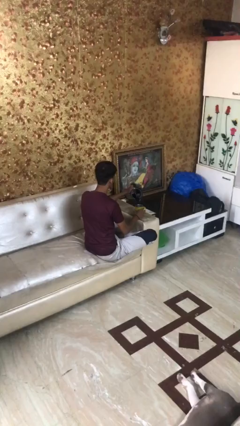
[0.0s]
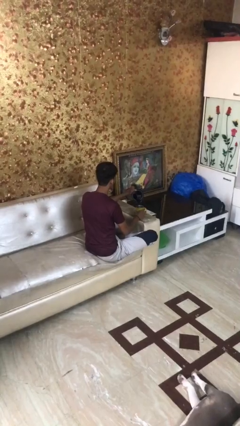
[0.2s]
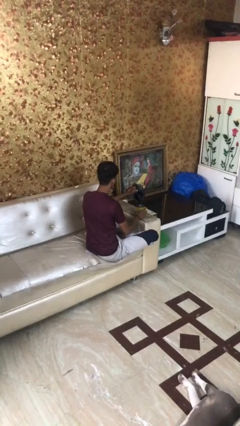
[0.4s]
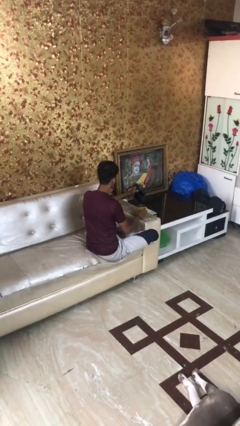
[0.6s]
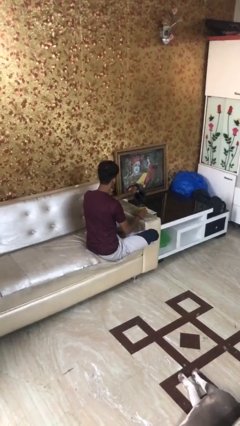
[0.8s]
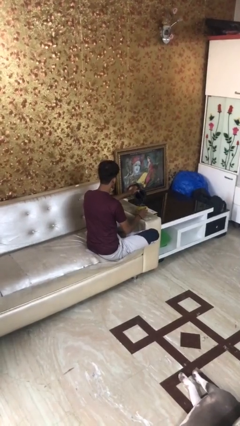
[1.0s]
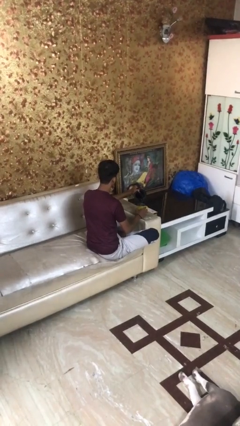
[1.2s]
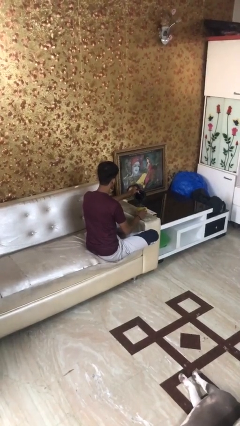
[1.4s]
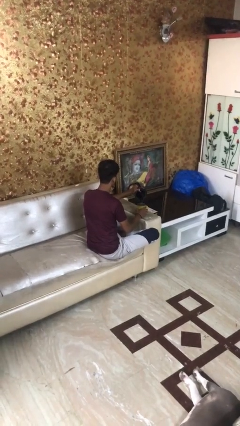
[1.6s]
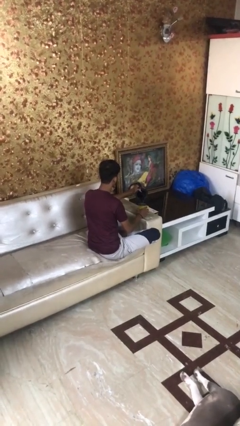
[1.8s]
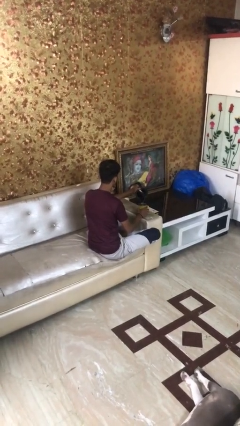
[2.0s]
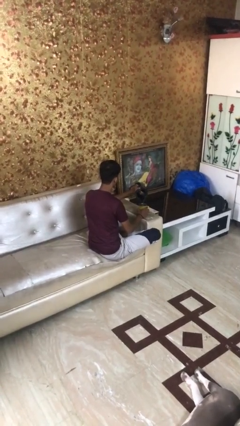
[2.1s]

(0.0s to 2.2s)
person pours coffee into mug

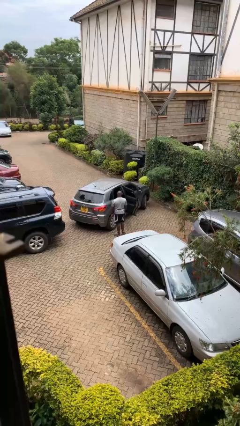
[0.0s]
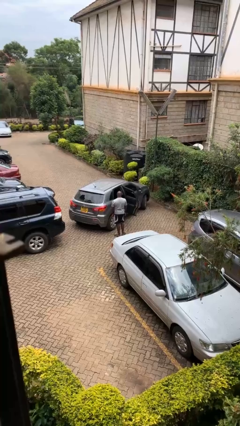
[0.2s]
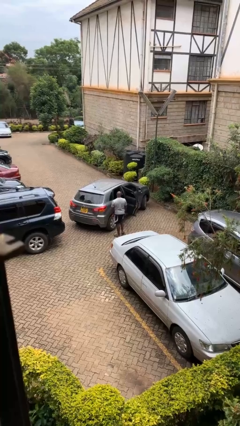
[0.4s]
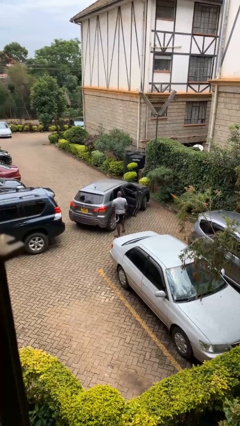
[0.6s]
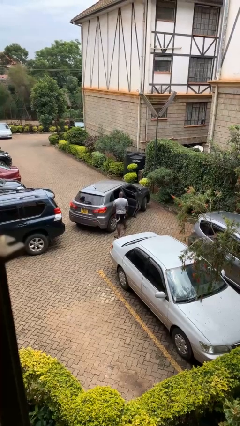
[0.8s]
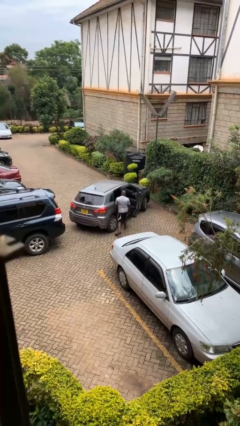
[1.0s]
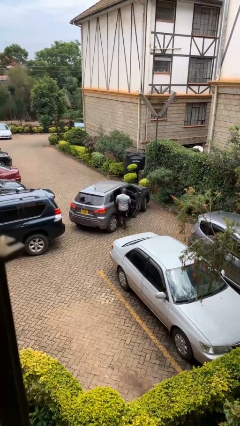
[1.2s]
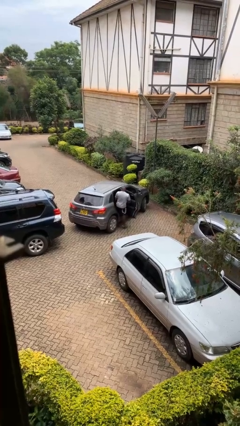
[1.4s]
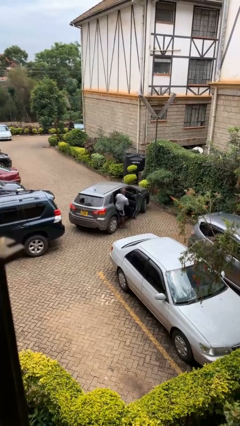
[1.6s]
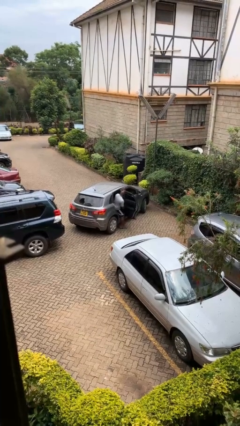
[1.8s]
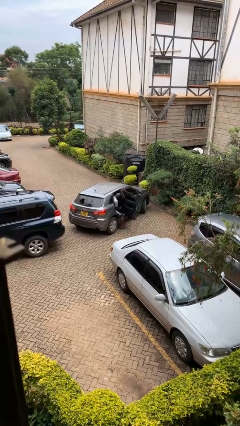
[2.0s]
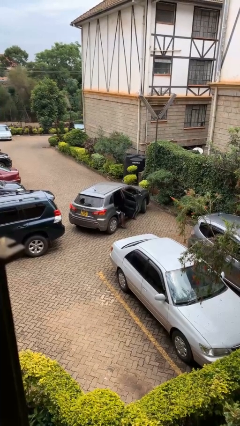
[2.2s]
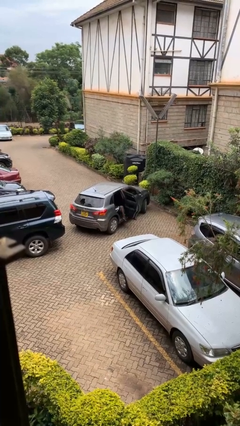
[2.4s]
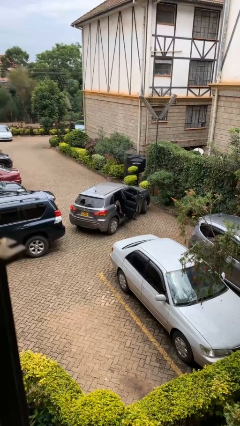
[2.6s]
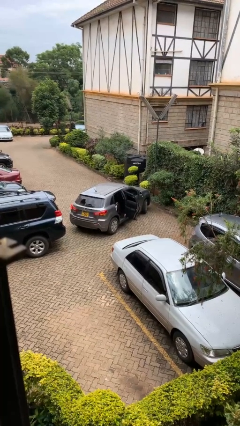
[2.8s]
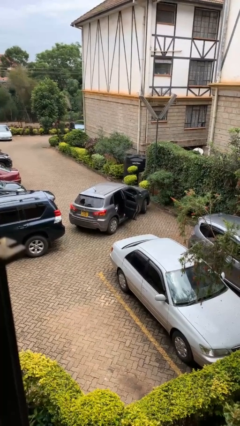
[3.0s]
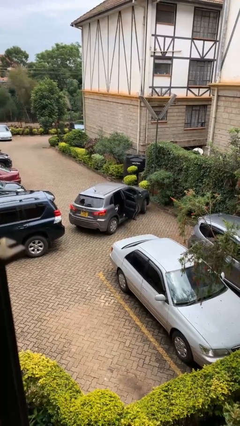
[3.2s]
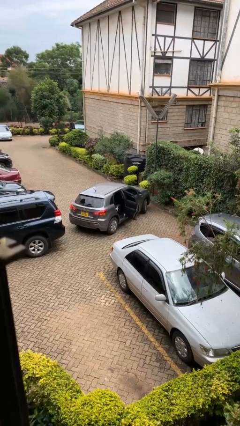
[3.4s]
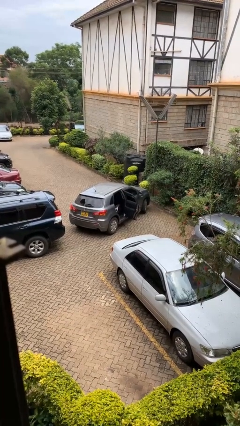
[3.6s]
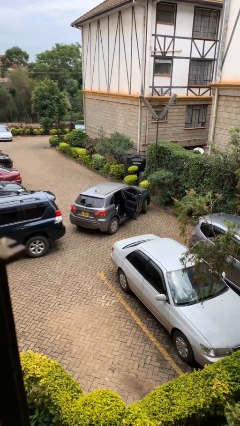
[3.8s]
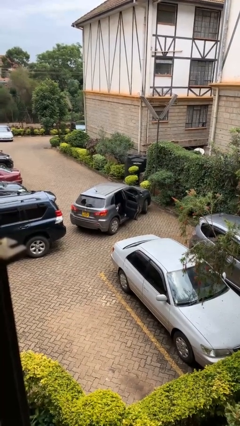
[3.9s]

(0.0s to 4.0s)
person enters car

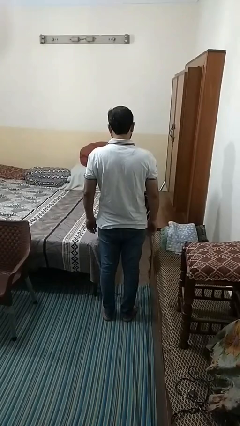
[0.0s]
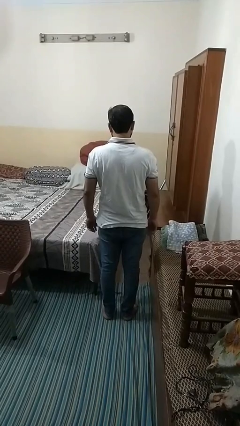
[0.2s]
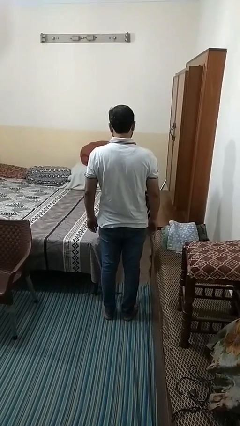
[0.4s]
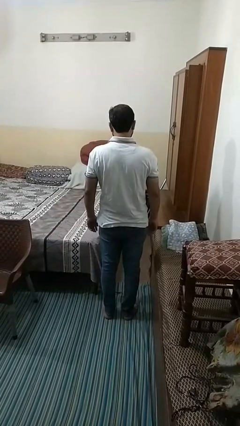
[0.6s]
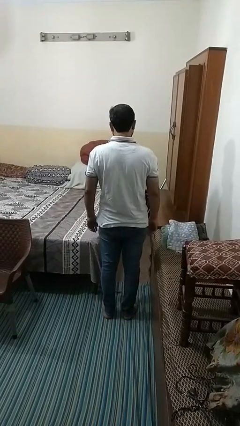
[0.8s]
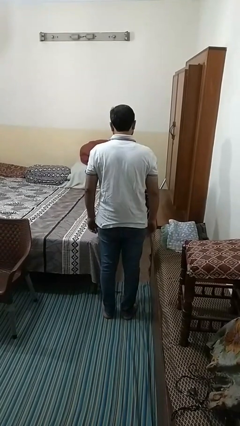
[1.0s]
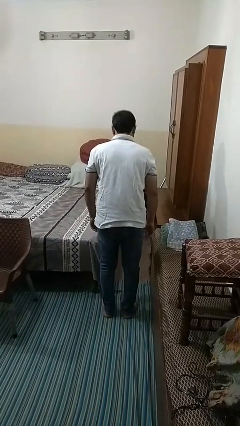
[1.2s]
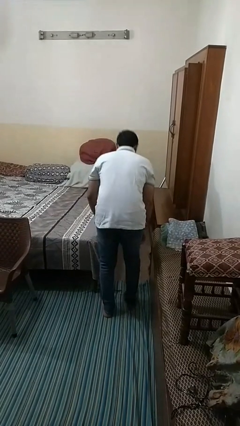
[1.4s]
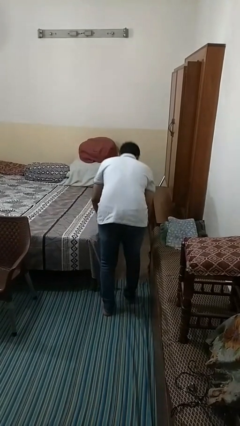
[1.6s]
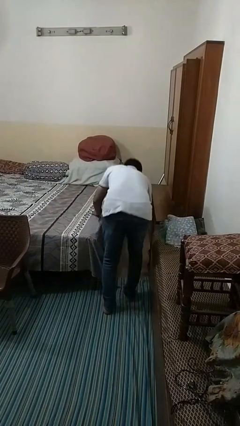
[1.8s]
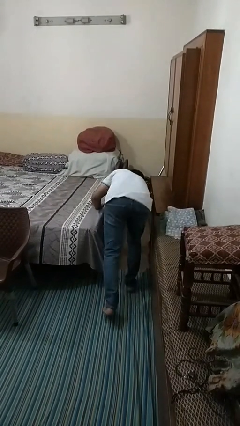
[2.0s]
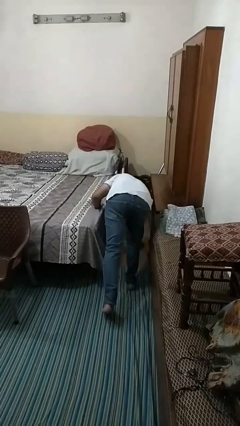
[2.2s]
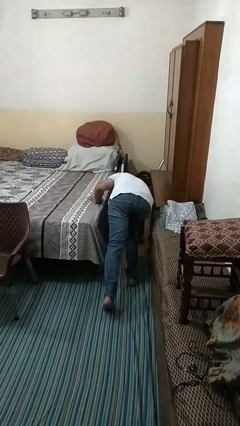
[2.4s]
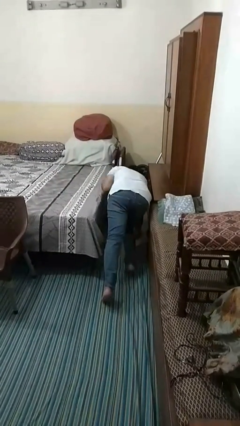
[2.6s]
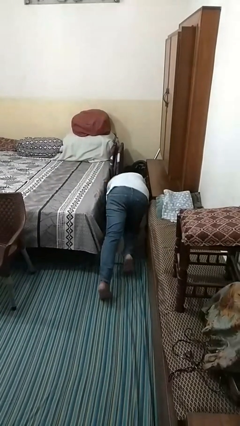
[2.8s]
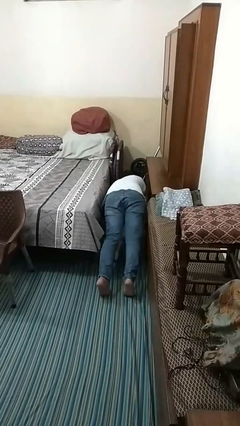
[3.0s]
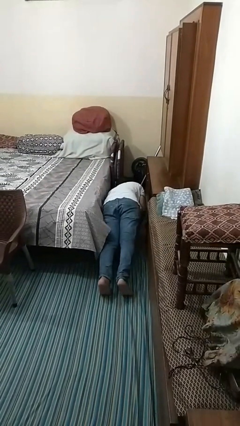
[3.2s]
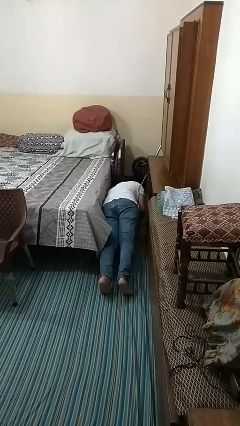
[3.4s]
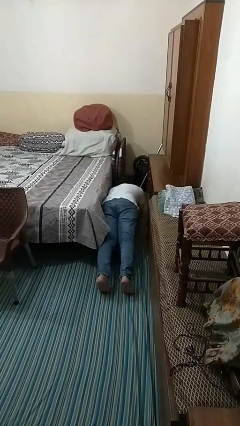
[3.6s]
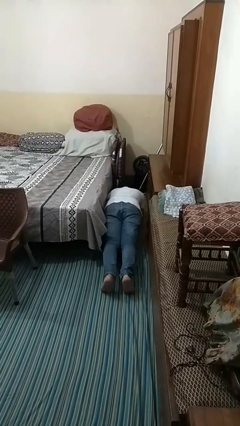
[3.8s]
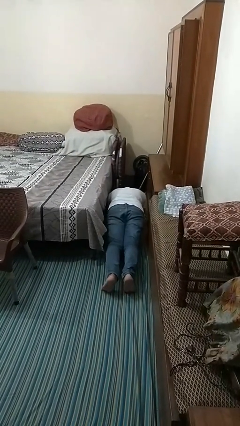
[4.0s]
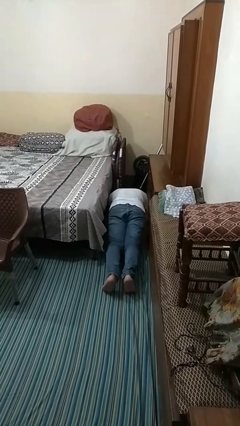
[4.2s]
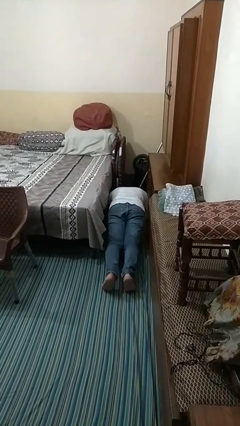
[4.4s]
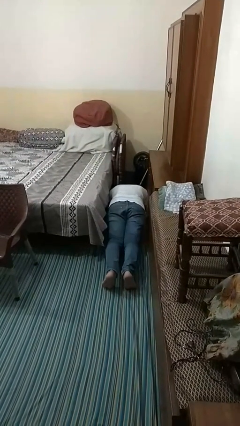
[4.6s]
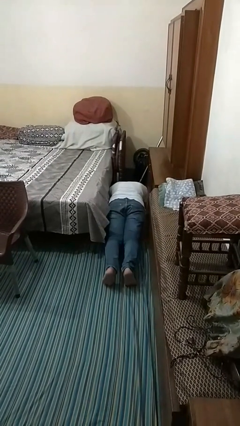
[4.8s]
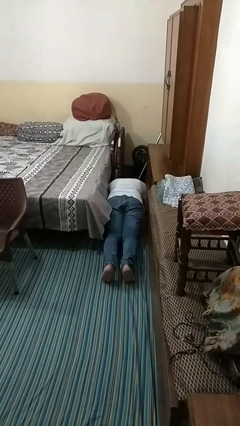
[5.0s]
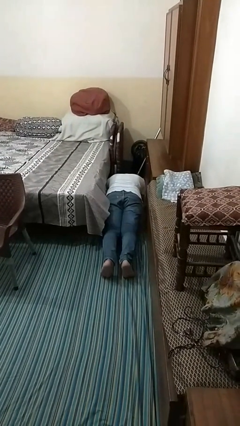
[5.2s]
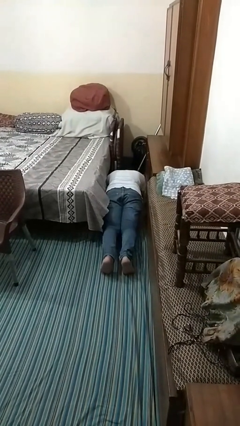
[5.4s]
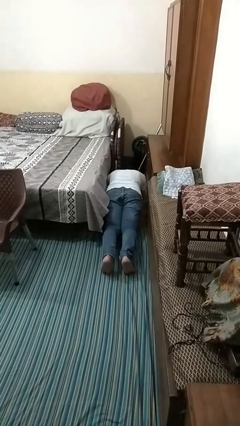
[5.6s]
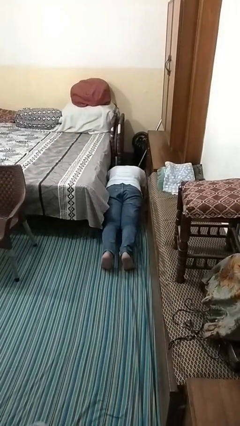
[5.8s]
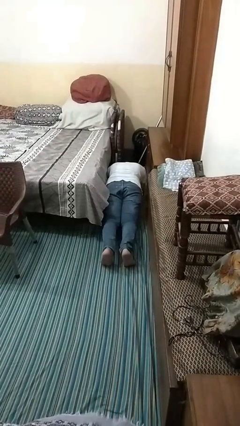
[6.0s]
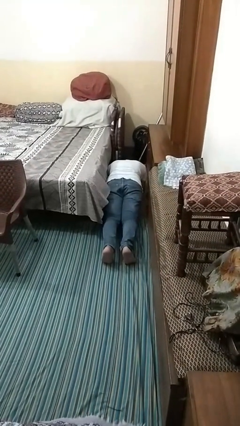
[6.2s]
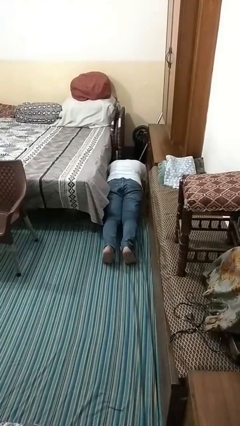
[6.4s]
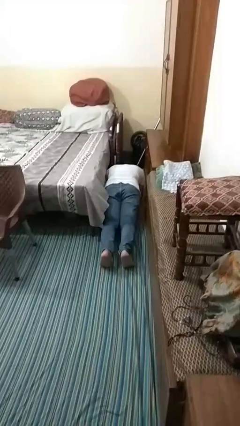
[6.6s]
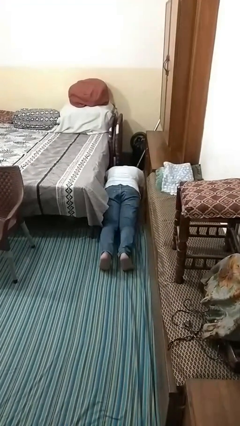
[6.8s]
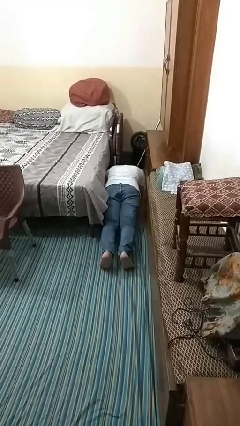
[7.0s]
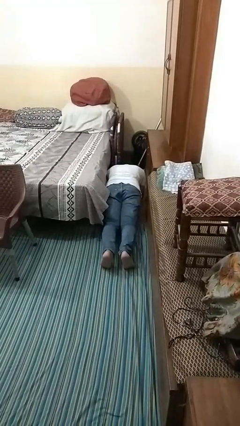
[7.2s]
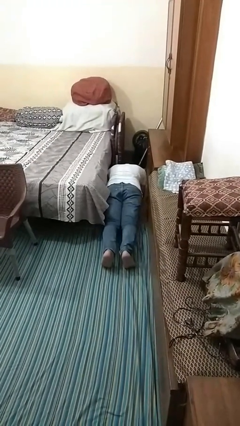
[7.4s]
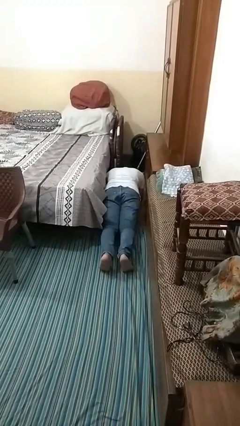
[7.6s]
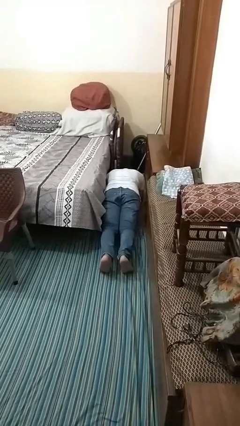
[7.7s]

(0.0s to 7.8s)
person exercises with plank

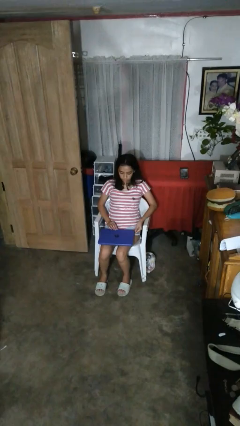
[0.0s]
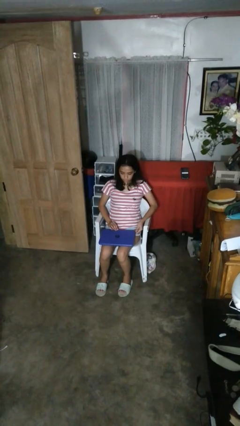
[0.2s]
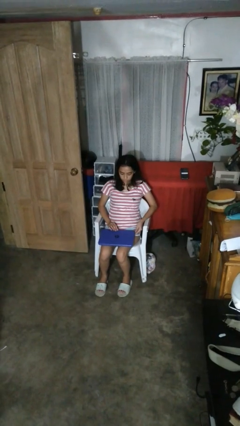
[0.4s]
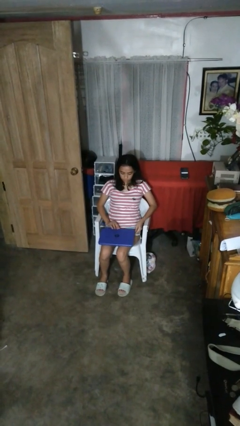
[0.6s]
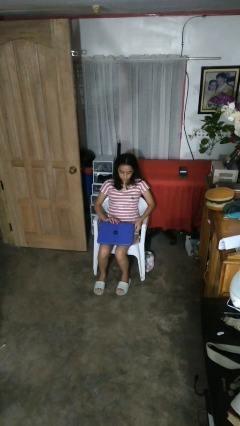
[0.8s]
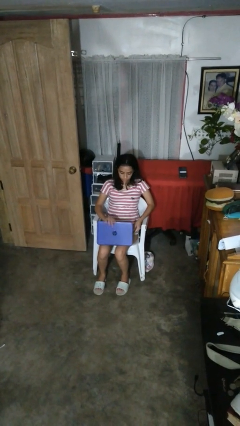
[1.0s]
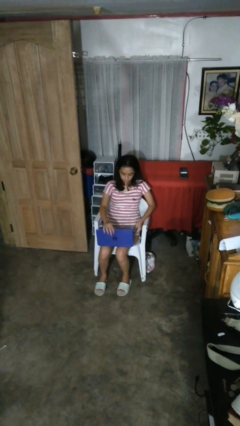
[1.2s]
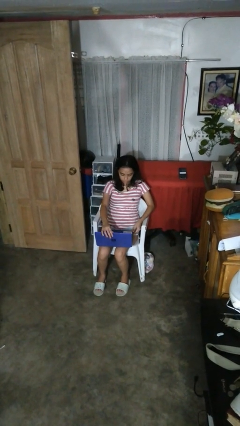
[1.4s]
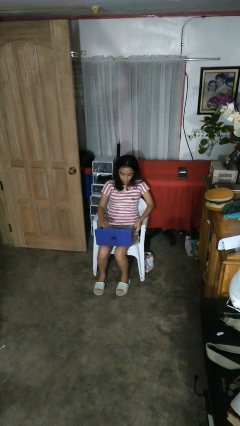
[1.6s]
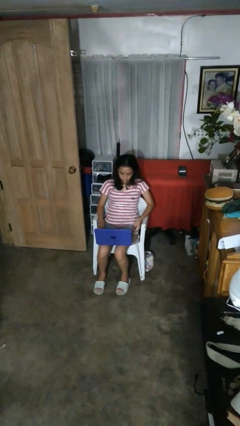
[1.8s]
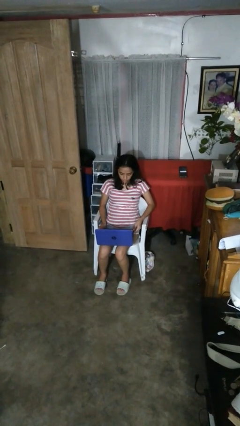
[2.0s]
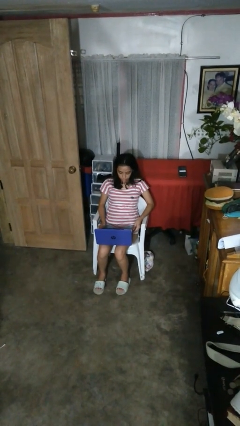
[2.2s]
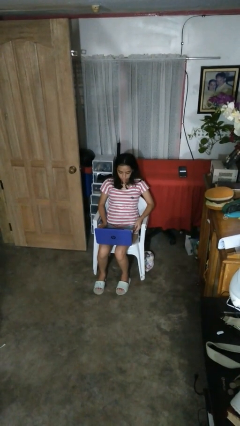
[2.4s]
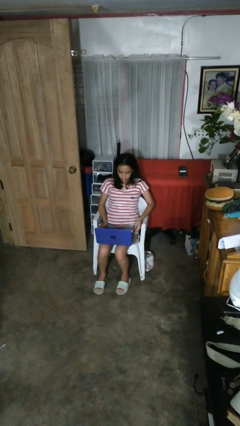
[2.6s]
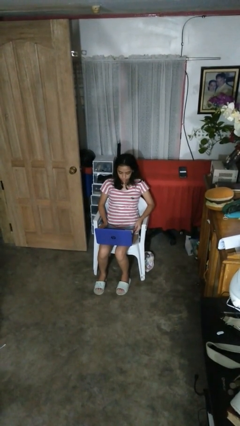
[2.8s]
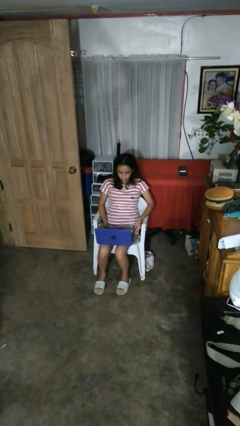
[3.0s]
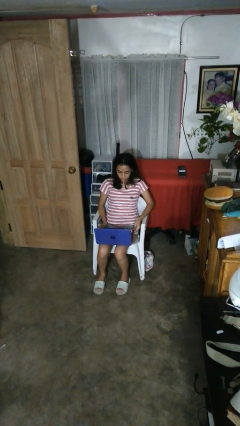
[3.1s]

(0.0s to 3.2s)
person opens laptop

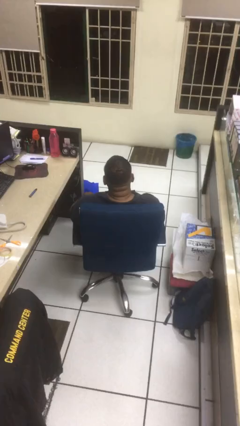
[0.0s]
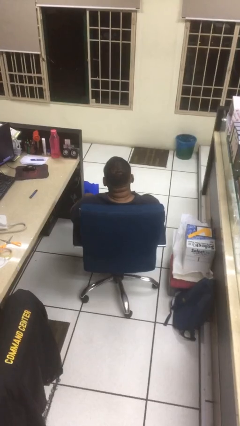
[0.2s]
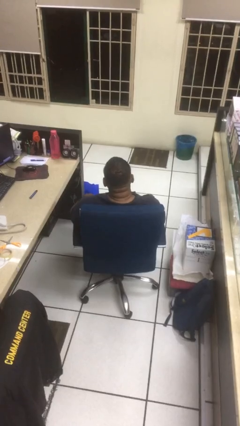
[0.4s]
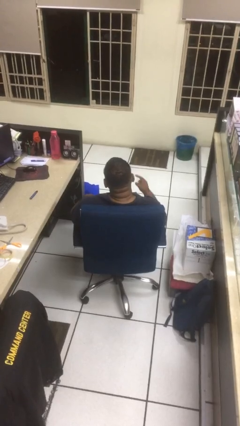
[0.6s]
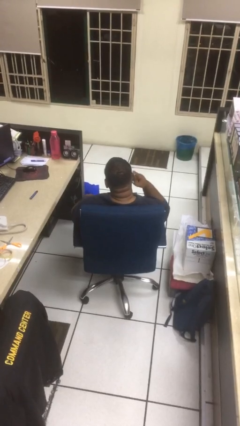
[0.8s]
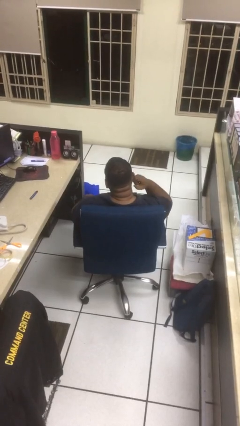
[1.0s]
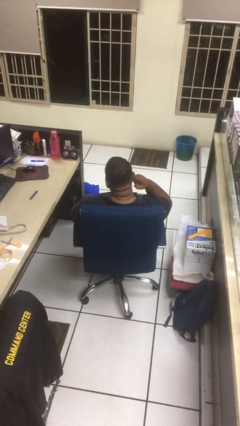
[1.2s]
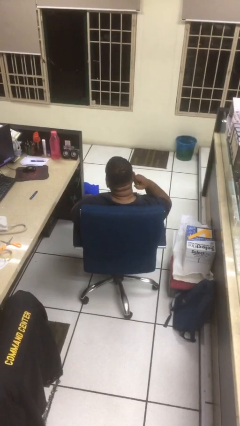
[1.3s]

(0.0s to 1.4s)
person gestures listen closely
